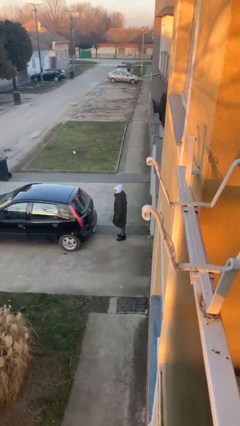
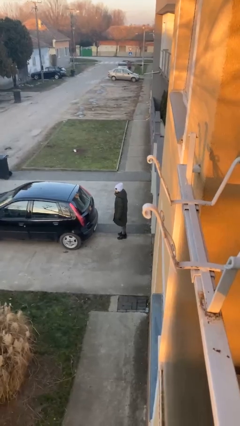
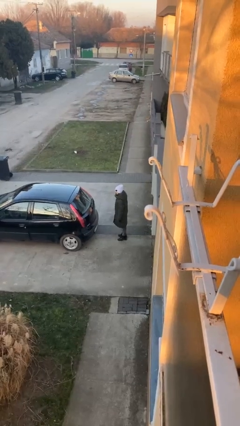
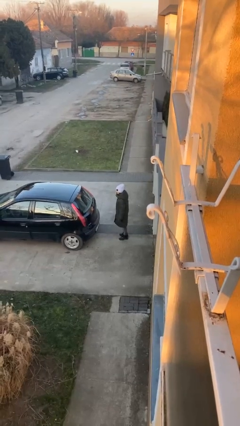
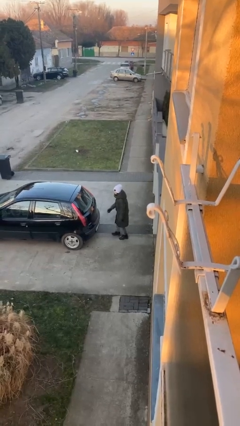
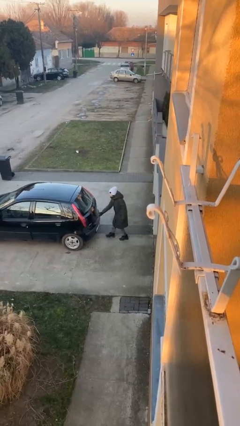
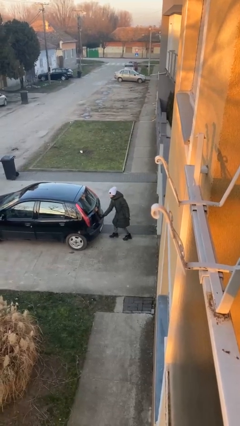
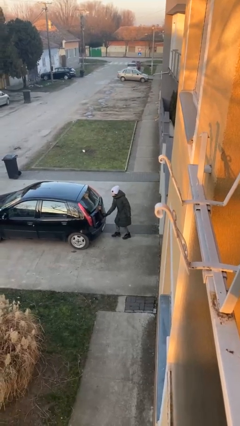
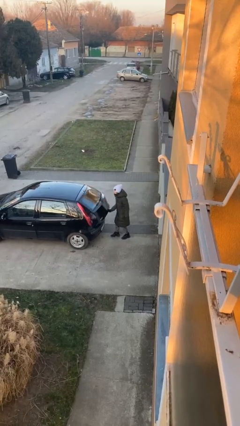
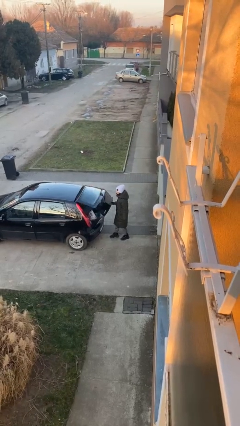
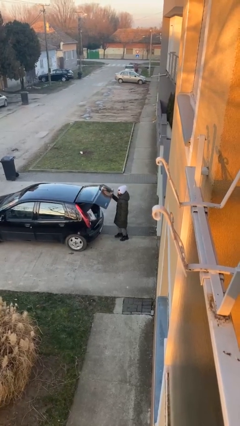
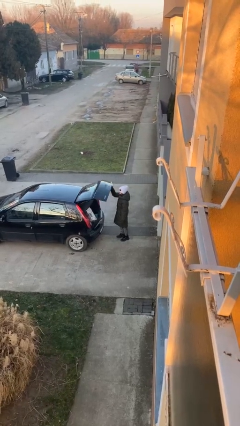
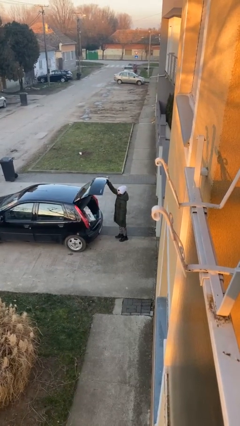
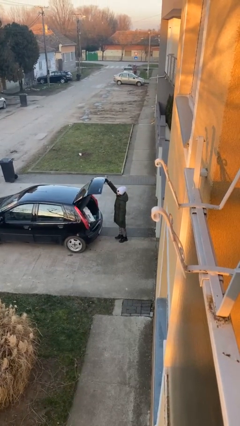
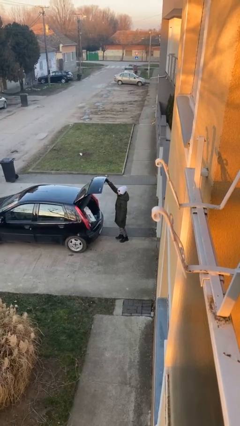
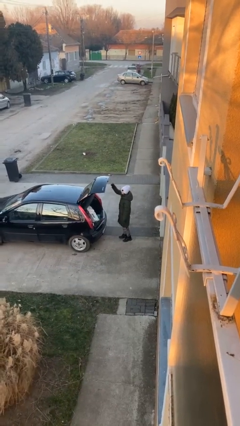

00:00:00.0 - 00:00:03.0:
person opens car trunk

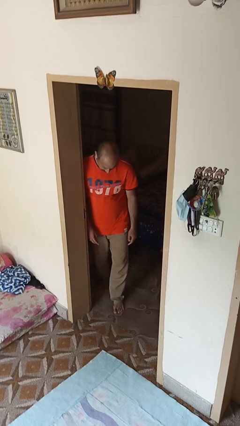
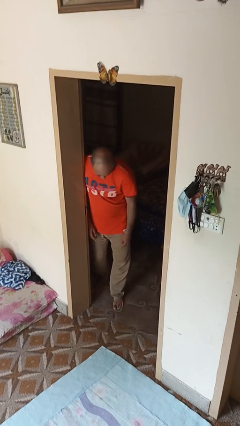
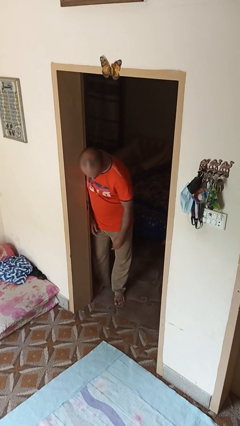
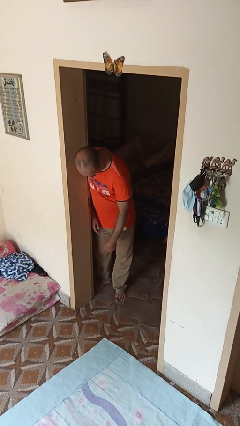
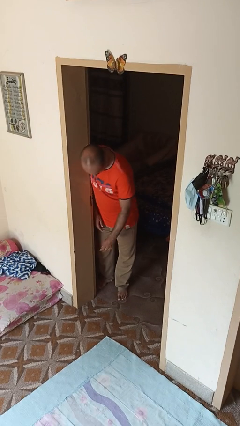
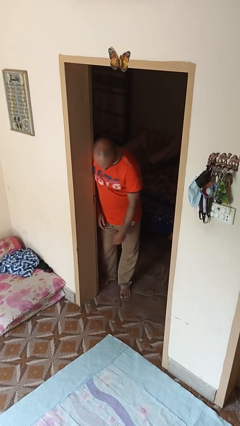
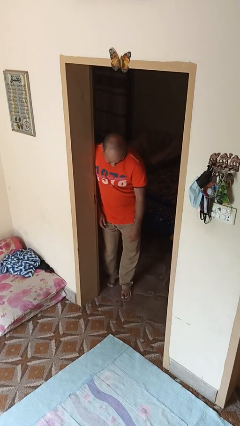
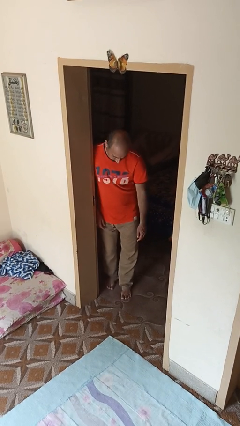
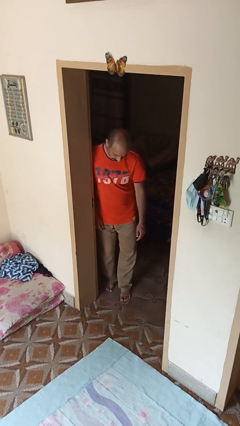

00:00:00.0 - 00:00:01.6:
person bumps into wall

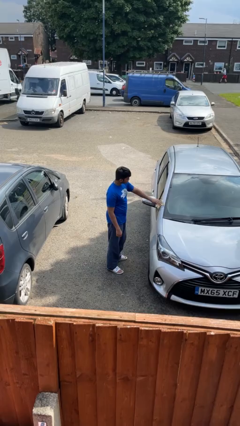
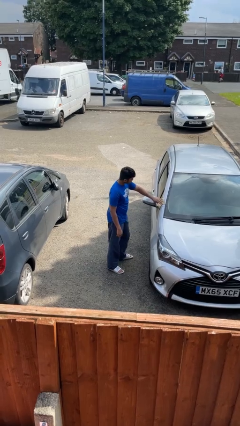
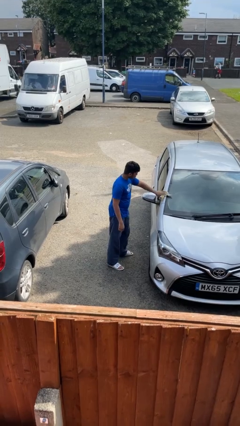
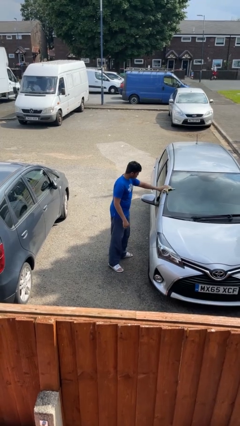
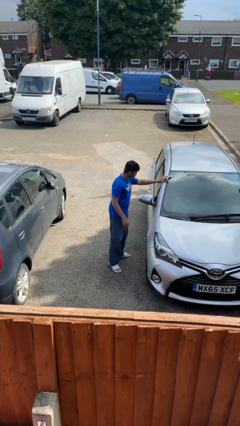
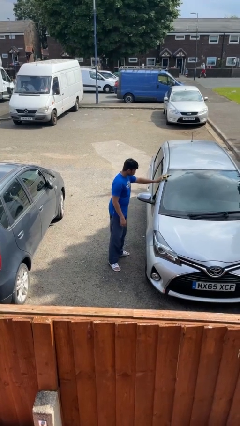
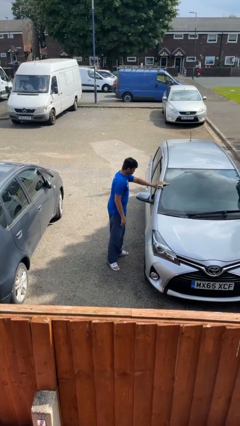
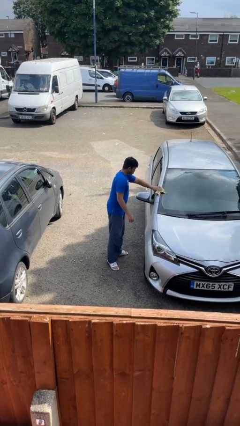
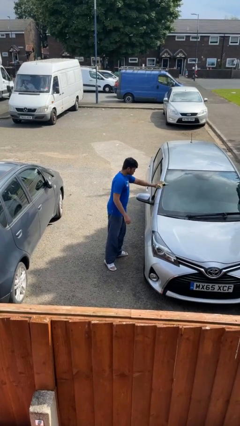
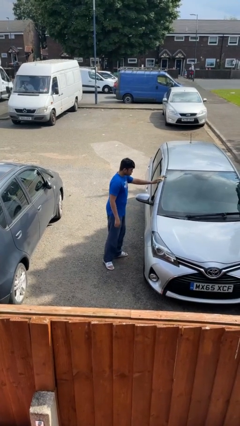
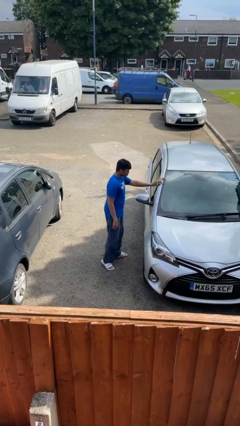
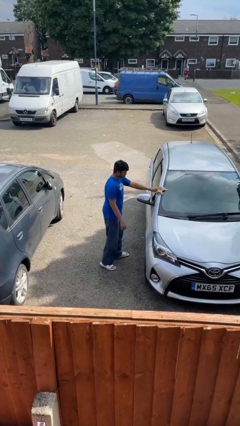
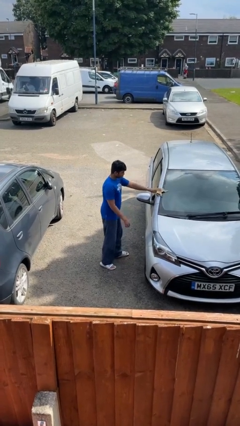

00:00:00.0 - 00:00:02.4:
person polishes car with rag

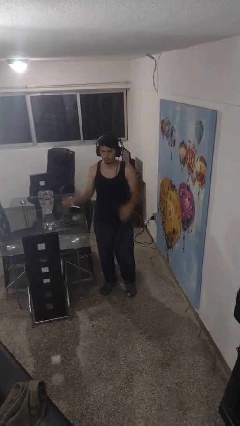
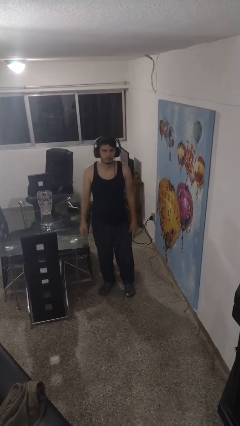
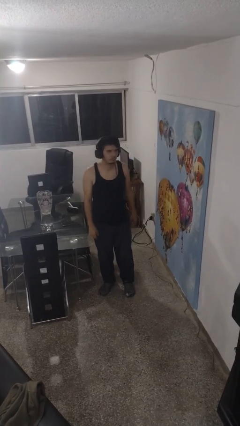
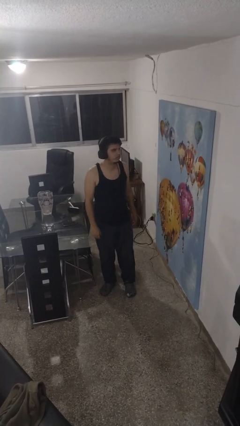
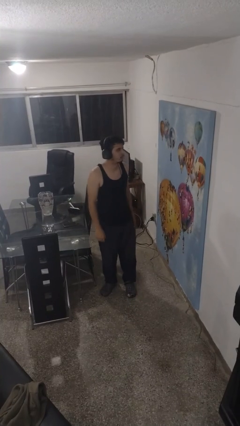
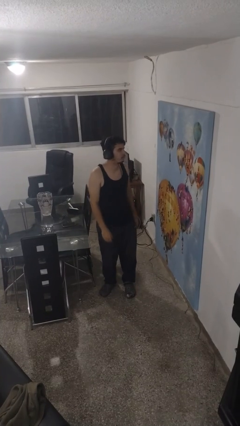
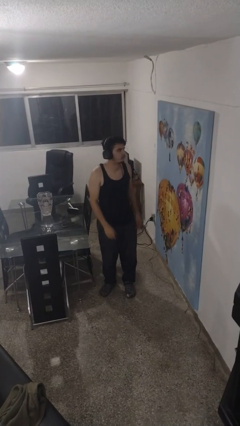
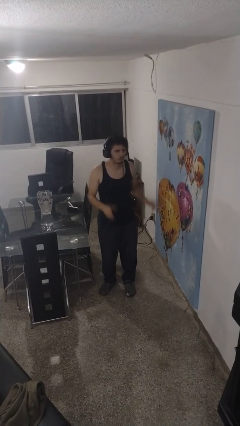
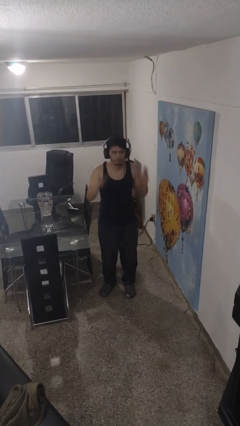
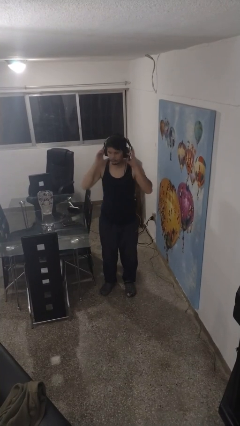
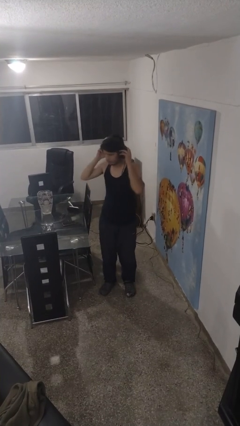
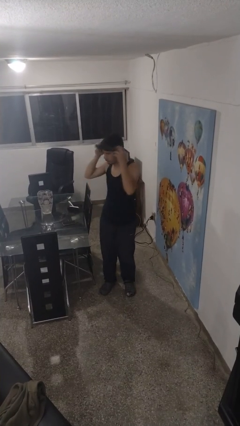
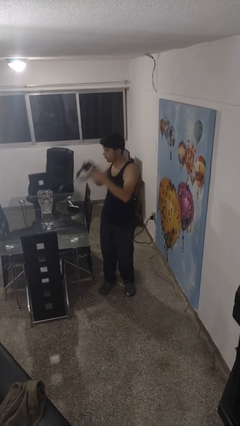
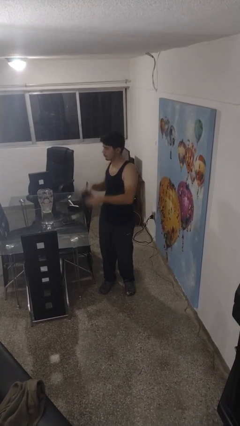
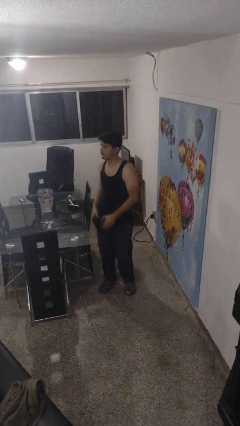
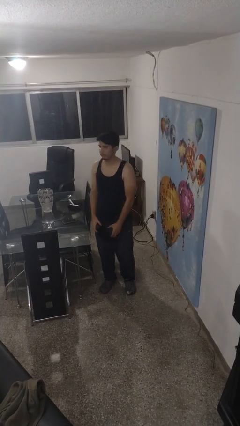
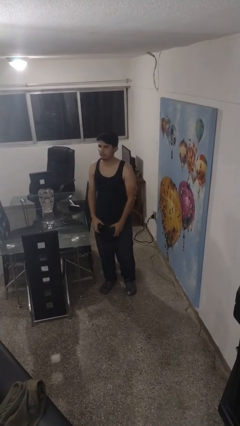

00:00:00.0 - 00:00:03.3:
person takes off headphones

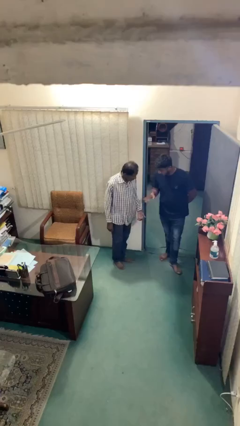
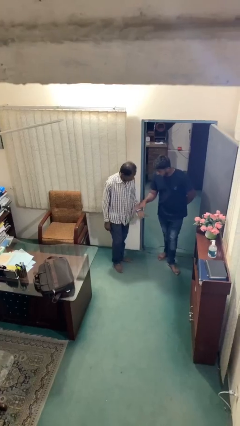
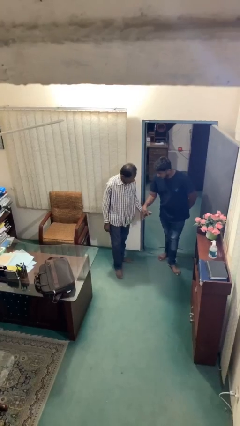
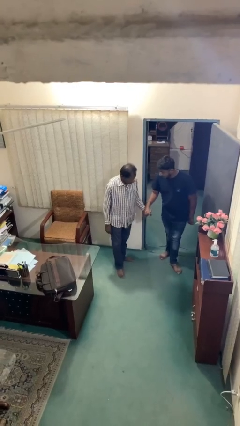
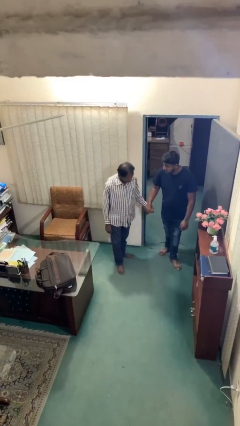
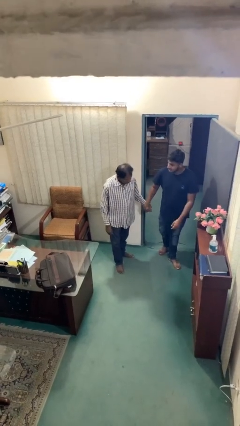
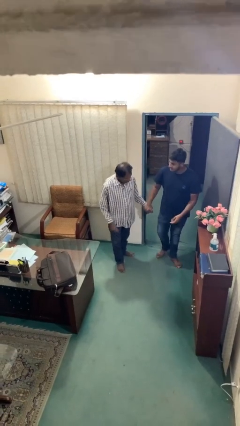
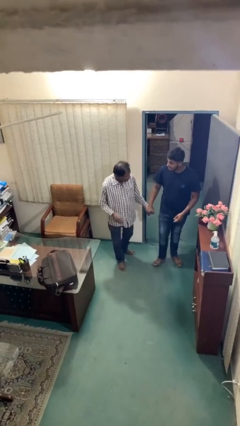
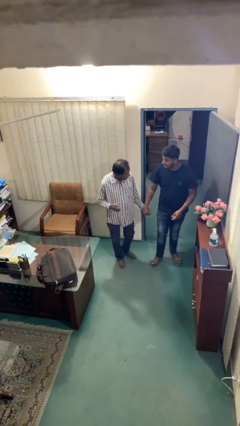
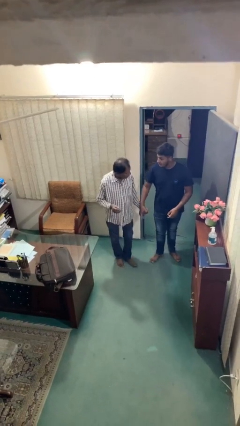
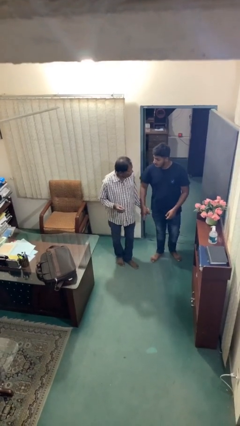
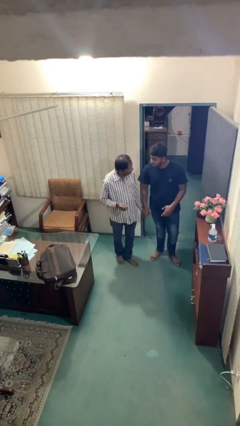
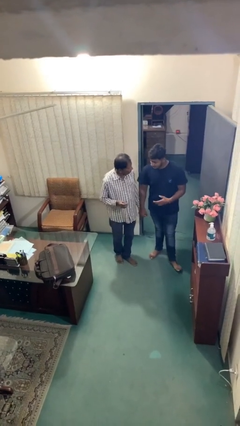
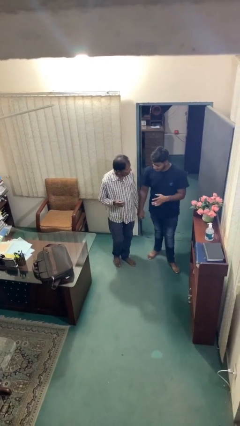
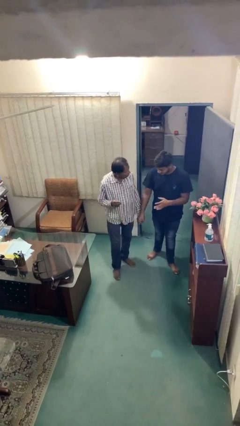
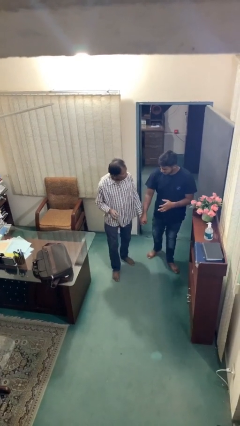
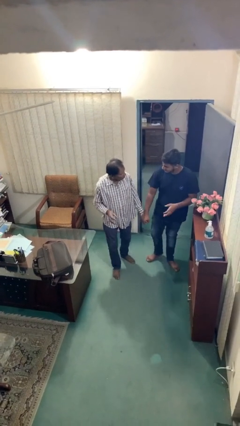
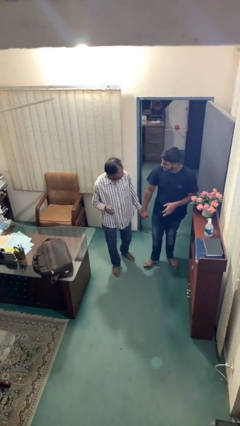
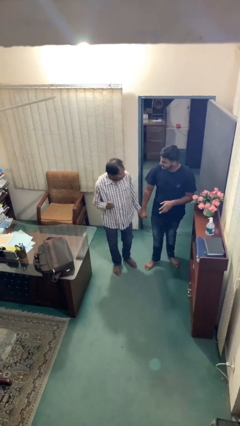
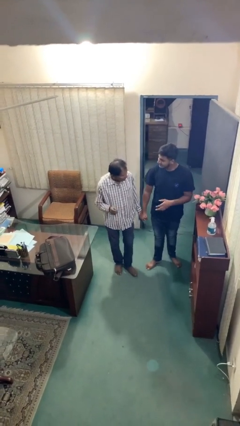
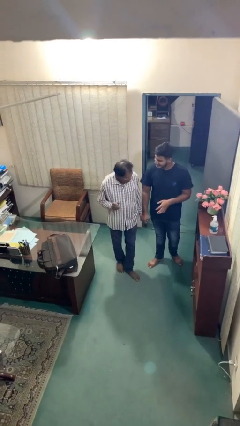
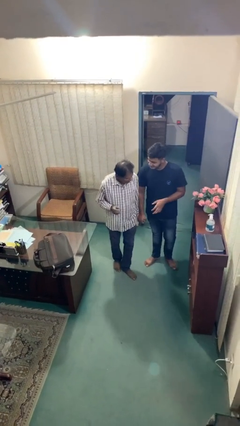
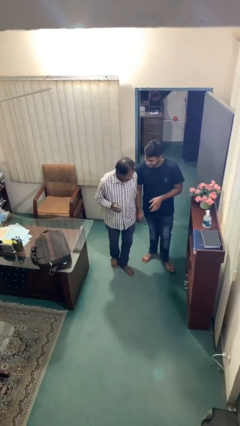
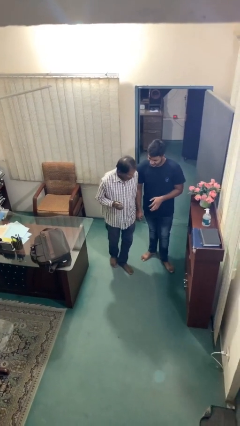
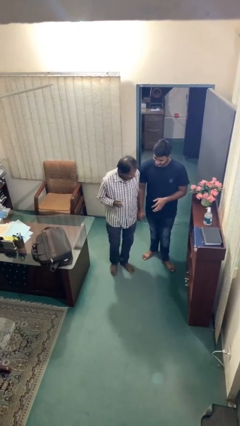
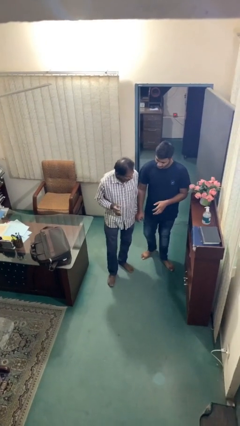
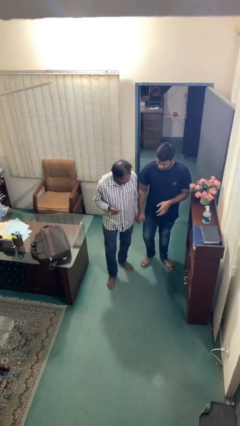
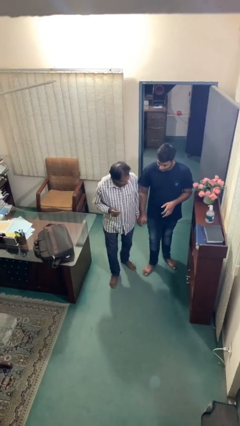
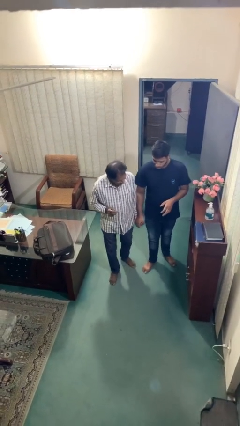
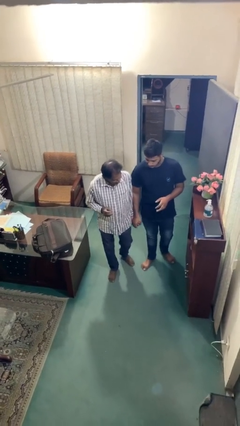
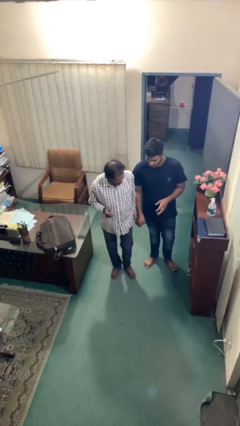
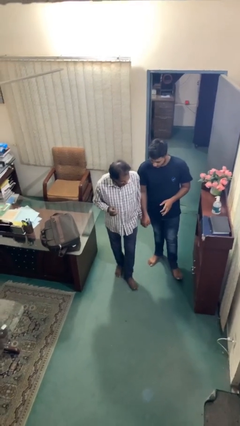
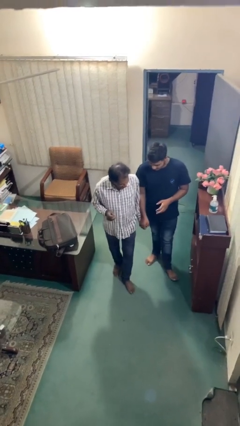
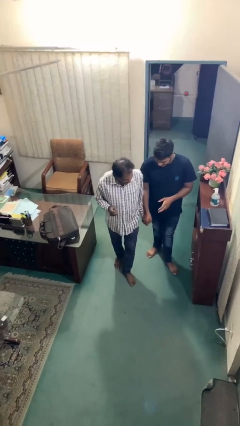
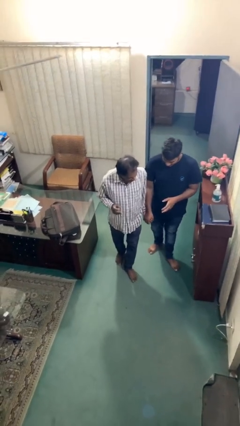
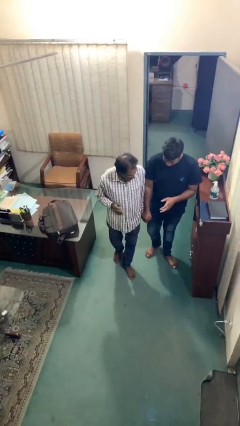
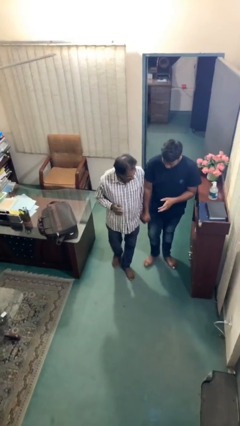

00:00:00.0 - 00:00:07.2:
person holds hand
